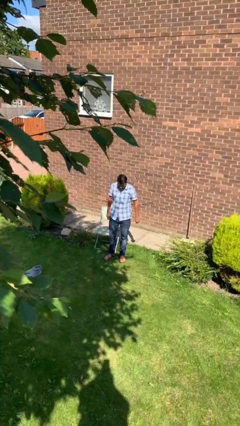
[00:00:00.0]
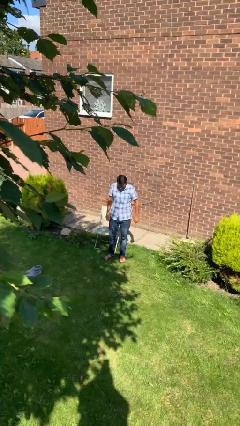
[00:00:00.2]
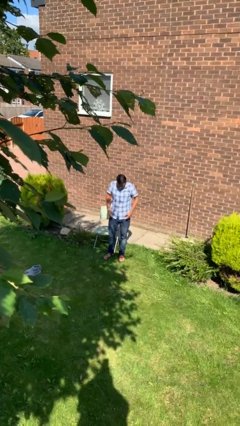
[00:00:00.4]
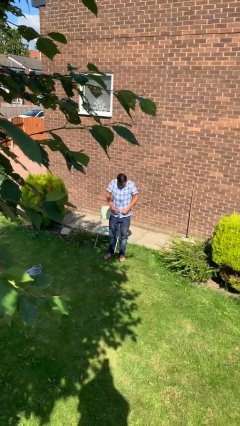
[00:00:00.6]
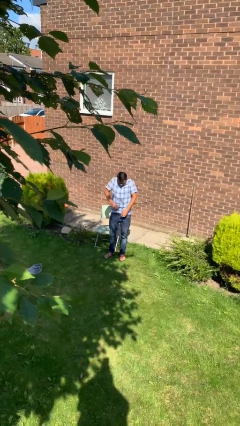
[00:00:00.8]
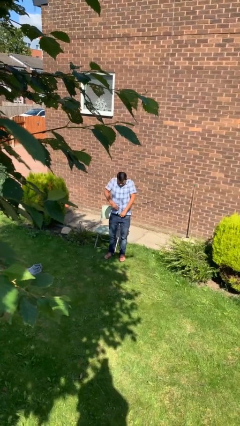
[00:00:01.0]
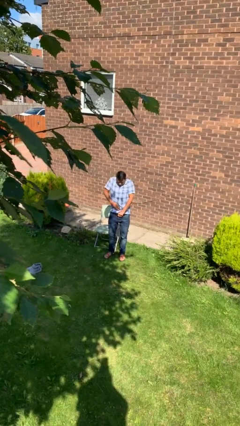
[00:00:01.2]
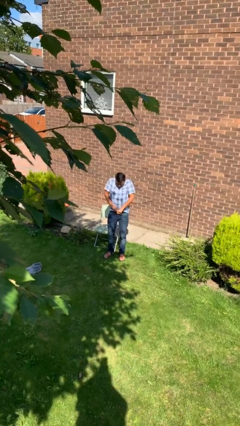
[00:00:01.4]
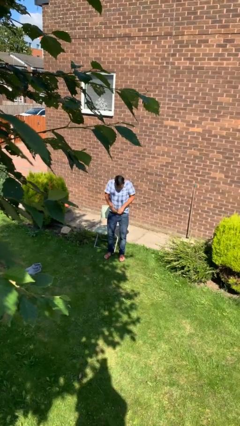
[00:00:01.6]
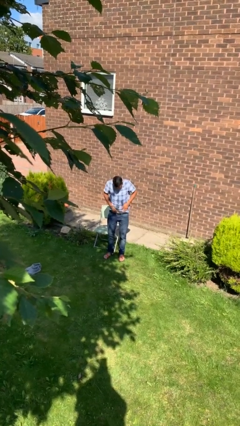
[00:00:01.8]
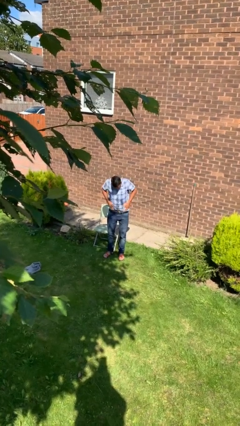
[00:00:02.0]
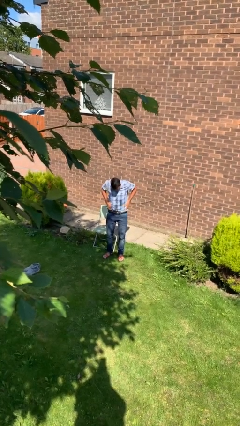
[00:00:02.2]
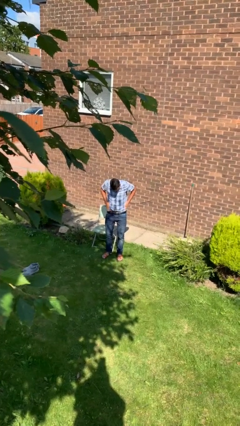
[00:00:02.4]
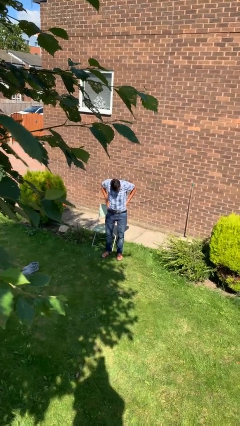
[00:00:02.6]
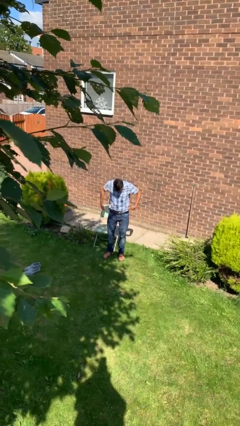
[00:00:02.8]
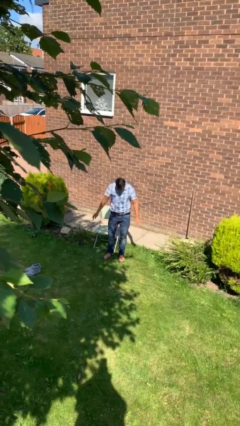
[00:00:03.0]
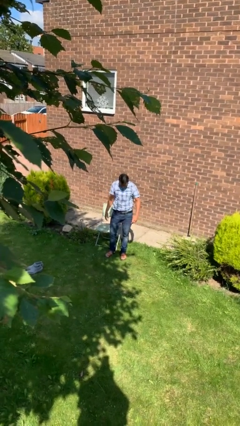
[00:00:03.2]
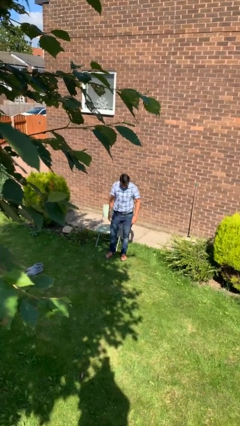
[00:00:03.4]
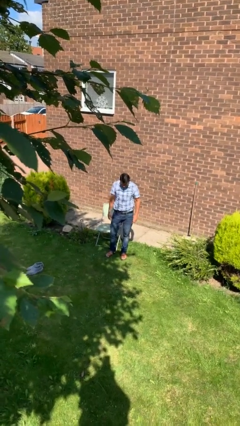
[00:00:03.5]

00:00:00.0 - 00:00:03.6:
person tucks in shirt

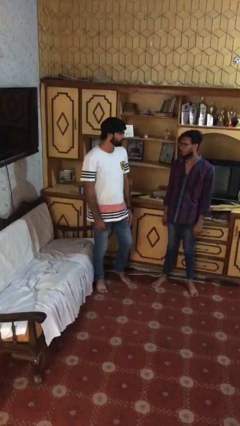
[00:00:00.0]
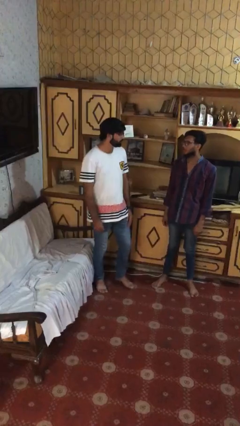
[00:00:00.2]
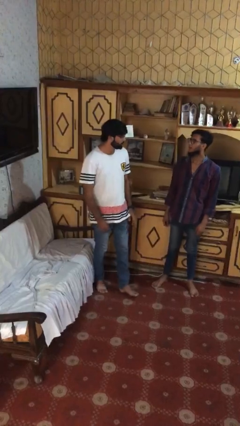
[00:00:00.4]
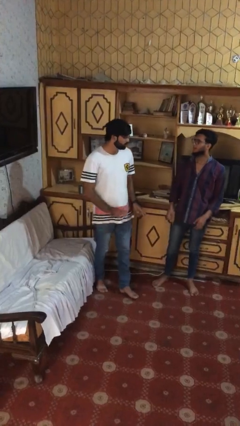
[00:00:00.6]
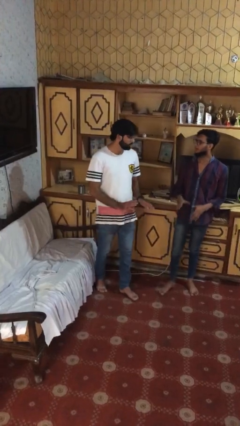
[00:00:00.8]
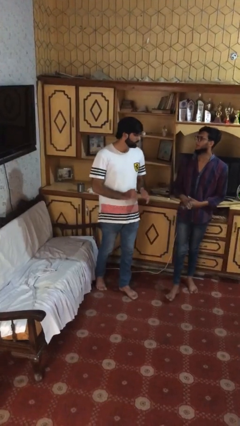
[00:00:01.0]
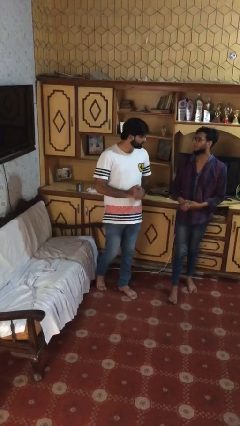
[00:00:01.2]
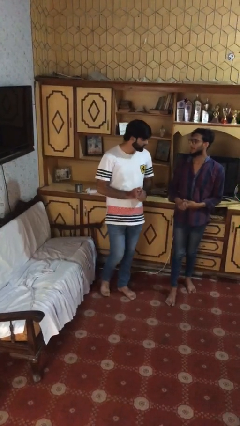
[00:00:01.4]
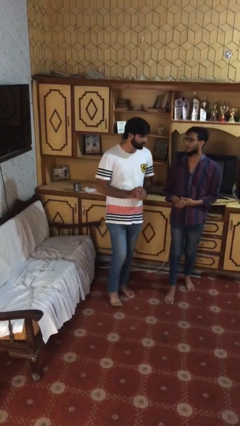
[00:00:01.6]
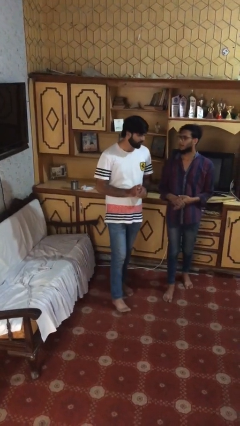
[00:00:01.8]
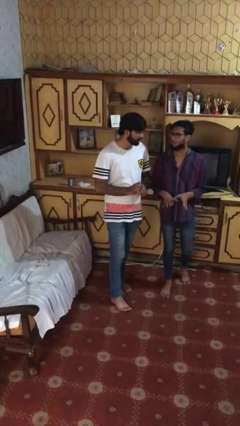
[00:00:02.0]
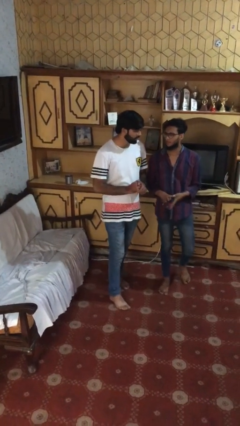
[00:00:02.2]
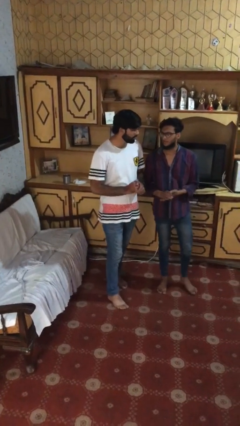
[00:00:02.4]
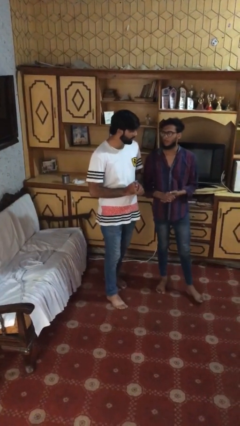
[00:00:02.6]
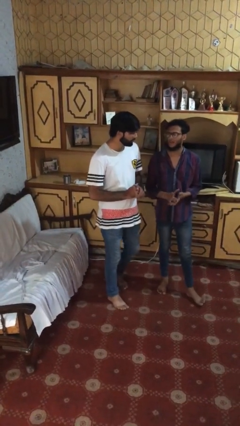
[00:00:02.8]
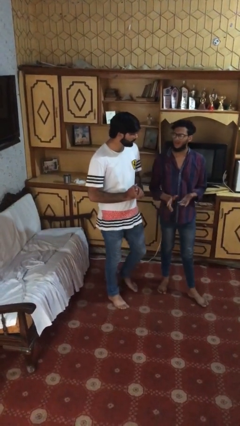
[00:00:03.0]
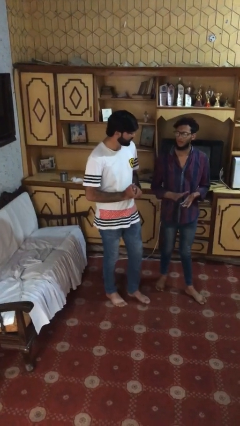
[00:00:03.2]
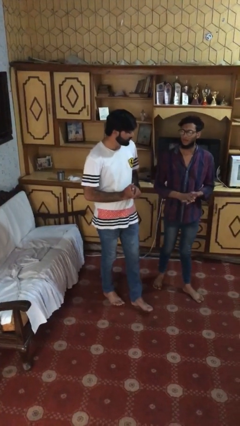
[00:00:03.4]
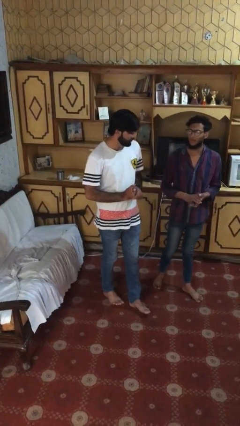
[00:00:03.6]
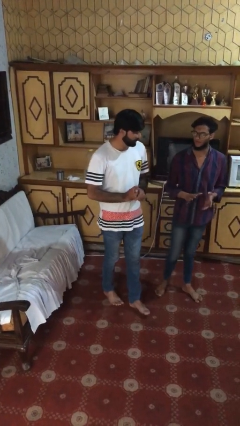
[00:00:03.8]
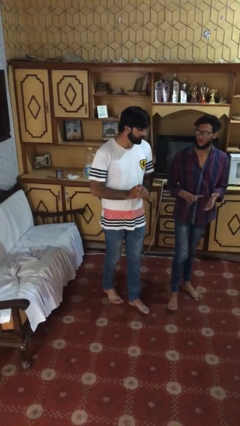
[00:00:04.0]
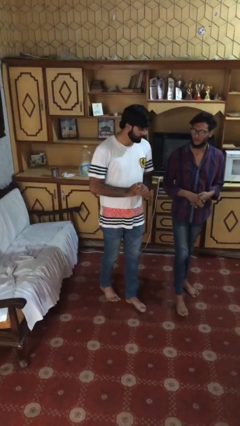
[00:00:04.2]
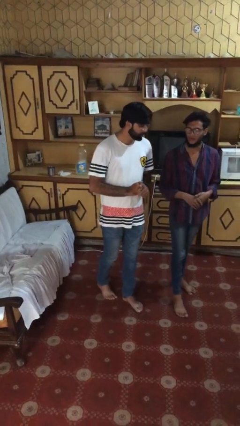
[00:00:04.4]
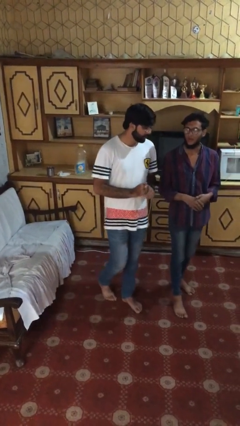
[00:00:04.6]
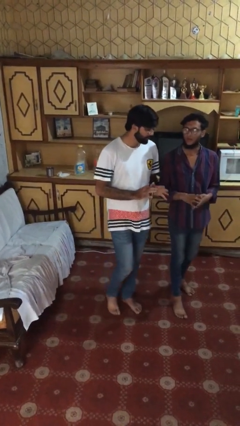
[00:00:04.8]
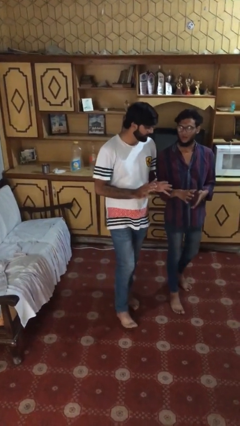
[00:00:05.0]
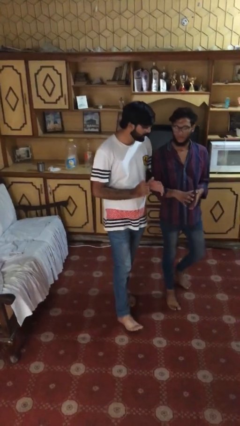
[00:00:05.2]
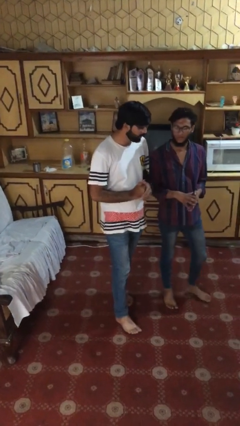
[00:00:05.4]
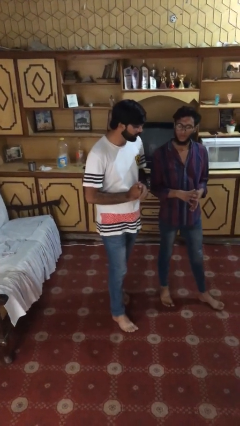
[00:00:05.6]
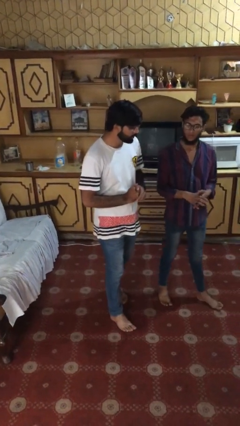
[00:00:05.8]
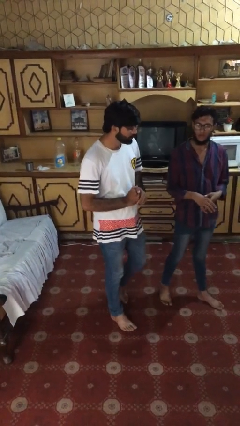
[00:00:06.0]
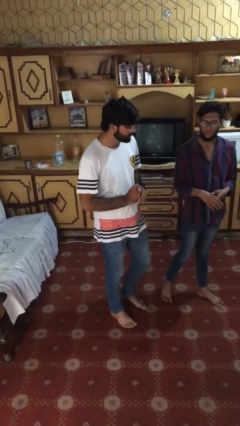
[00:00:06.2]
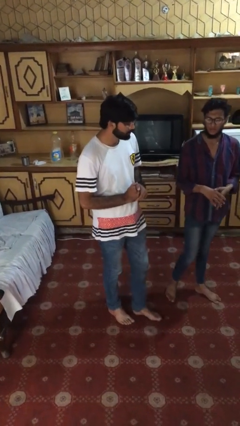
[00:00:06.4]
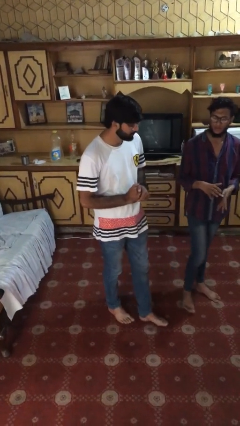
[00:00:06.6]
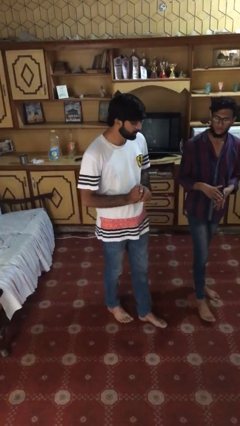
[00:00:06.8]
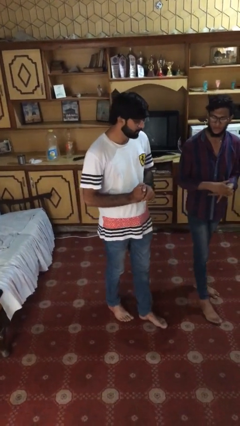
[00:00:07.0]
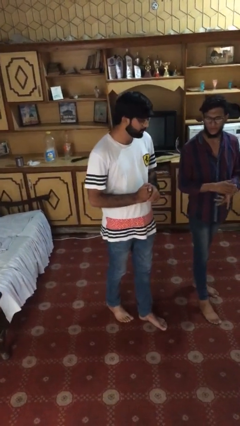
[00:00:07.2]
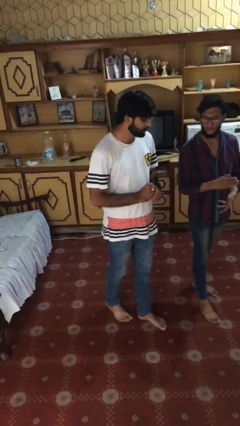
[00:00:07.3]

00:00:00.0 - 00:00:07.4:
person talks to person

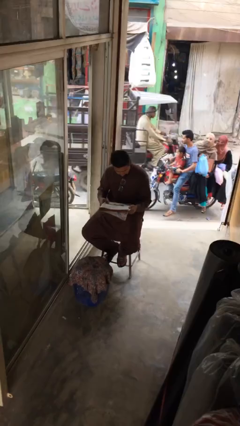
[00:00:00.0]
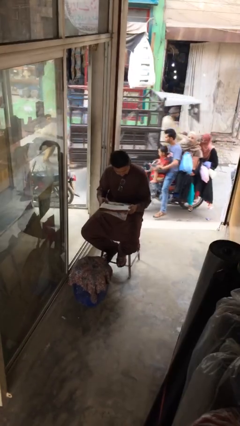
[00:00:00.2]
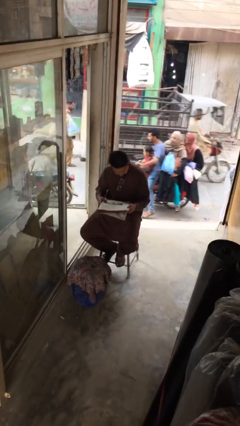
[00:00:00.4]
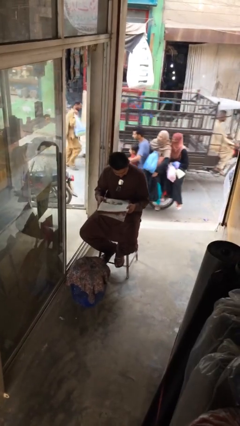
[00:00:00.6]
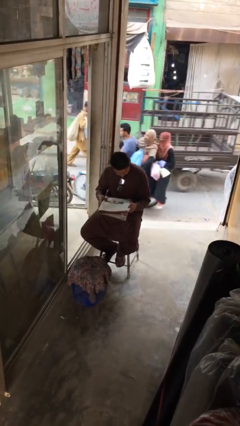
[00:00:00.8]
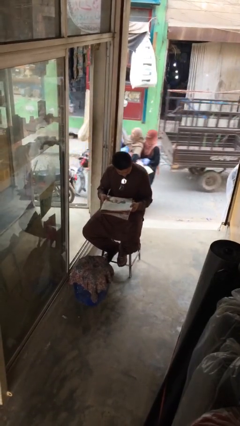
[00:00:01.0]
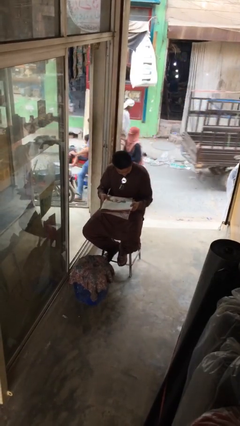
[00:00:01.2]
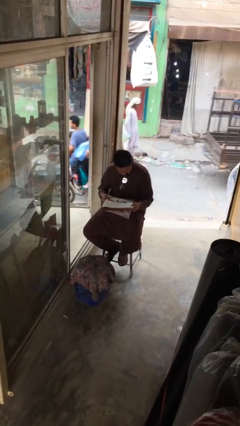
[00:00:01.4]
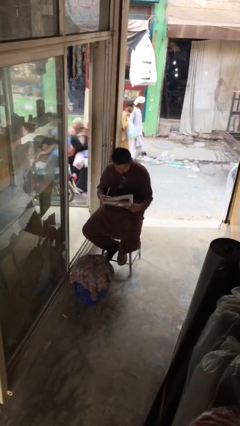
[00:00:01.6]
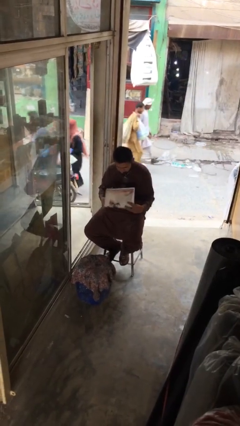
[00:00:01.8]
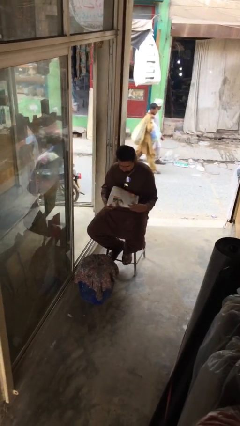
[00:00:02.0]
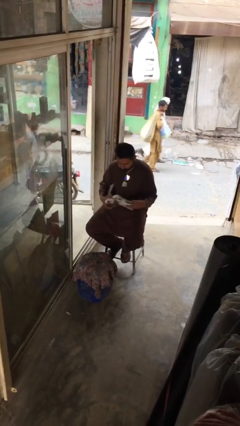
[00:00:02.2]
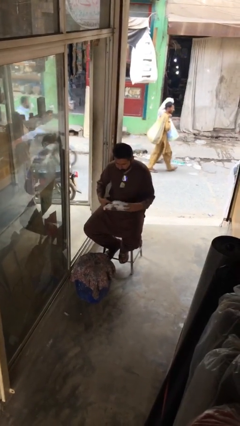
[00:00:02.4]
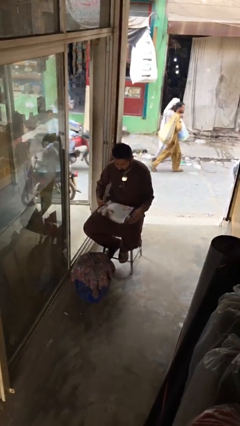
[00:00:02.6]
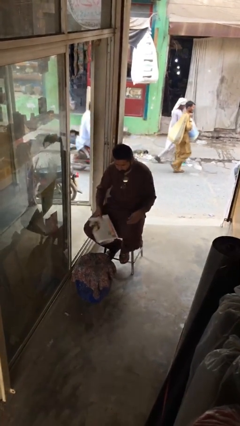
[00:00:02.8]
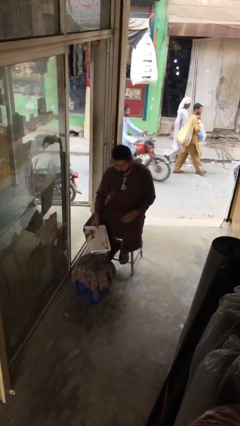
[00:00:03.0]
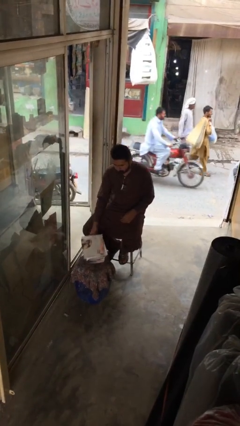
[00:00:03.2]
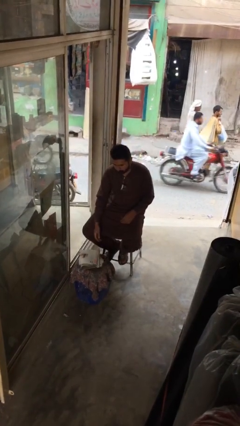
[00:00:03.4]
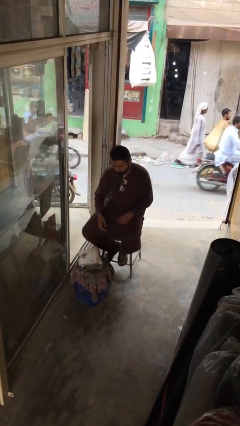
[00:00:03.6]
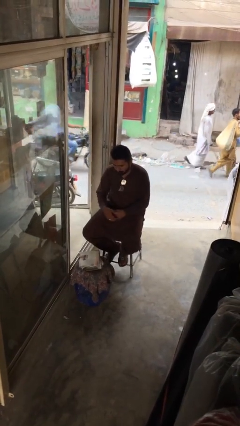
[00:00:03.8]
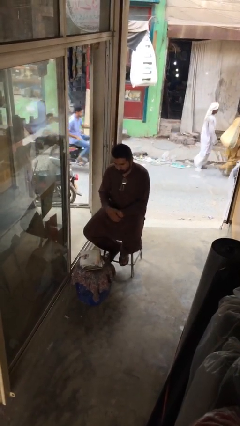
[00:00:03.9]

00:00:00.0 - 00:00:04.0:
person puts down object on table

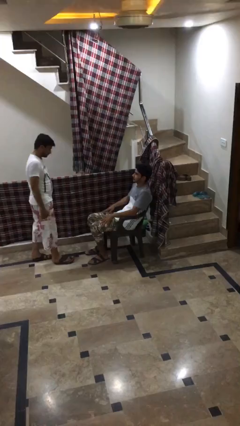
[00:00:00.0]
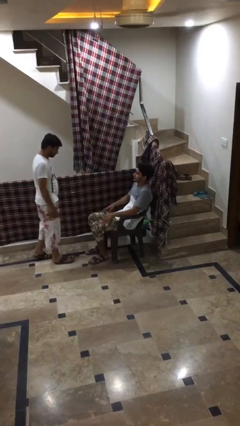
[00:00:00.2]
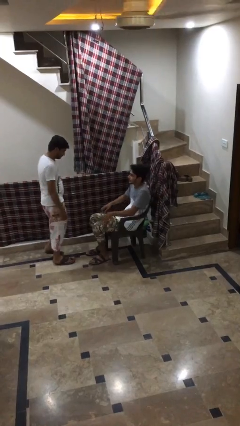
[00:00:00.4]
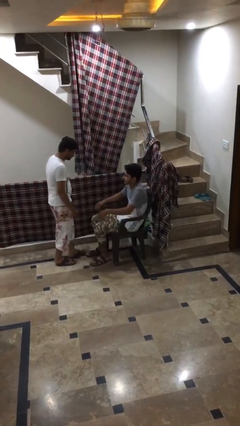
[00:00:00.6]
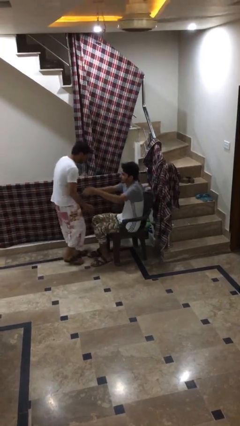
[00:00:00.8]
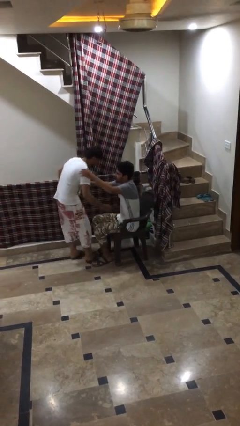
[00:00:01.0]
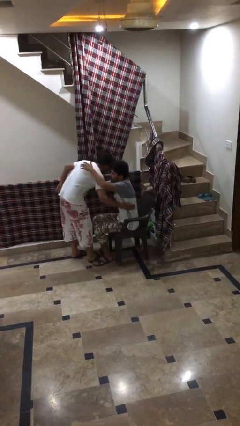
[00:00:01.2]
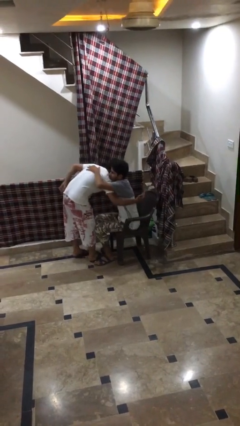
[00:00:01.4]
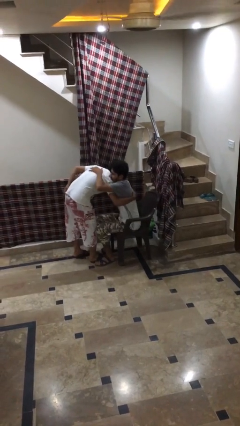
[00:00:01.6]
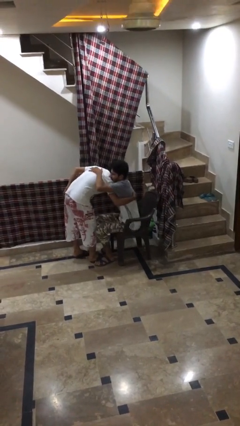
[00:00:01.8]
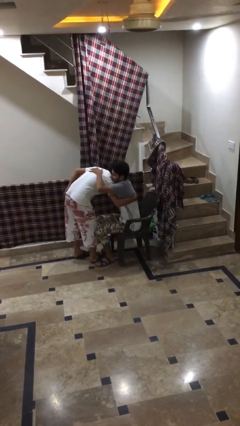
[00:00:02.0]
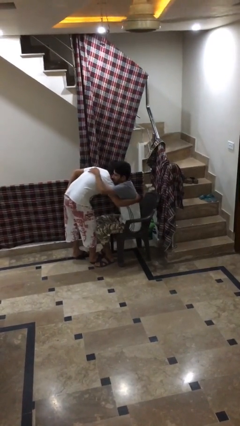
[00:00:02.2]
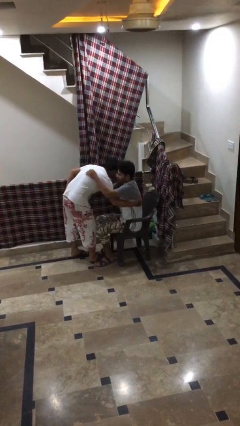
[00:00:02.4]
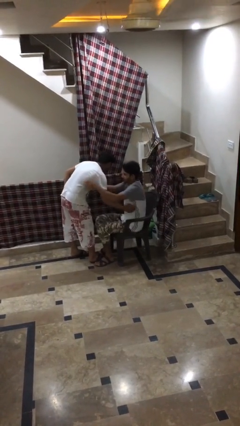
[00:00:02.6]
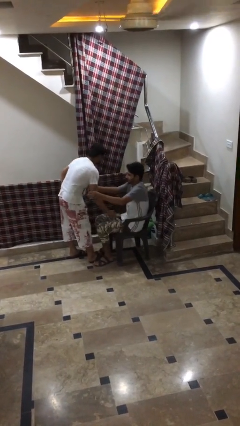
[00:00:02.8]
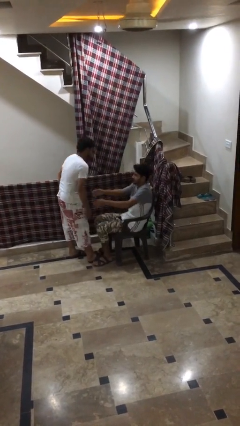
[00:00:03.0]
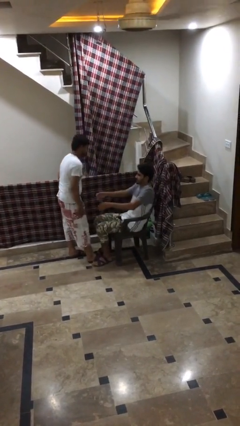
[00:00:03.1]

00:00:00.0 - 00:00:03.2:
person embraces person
